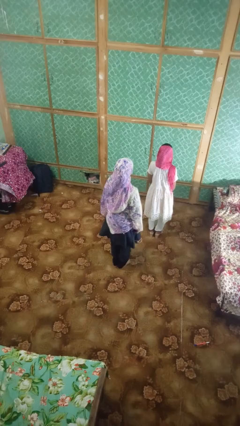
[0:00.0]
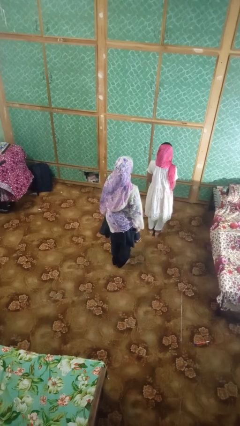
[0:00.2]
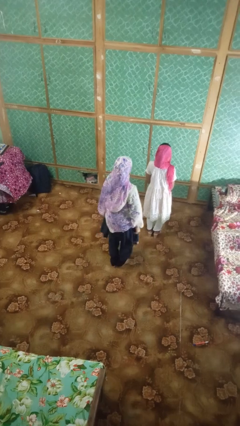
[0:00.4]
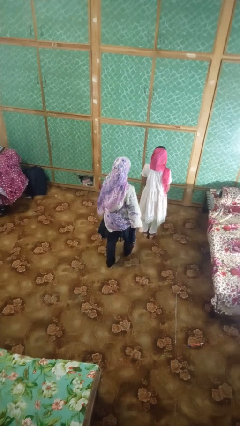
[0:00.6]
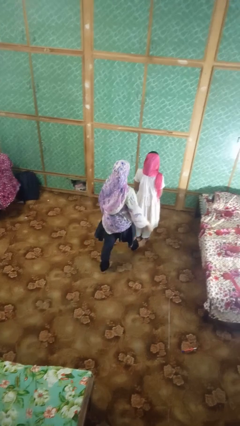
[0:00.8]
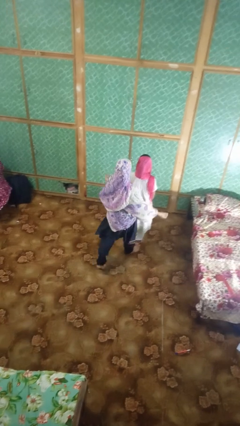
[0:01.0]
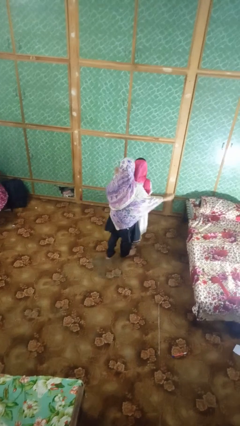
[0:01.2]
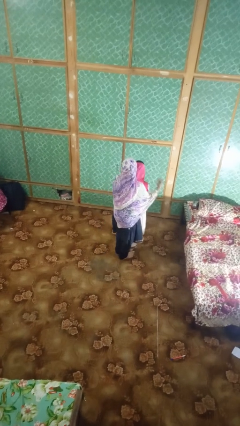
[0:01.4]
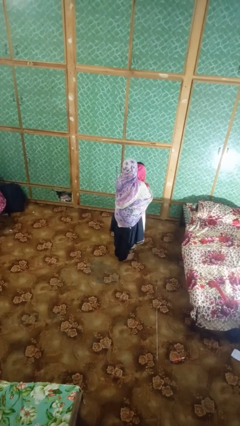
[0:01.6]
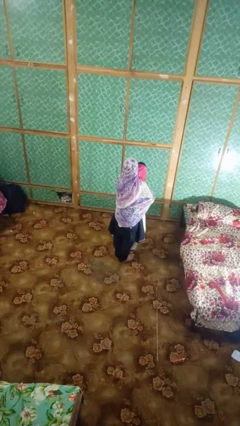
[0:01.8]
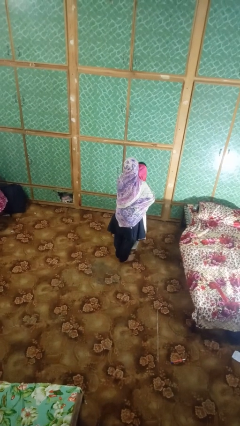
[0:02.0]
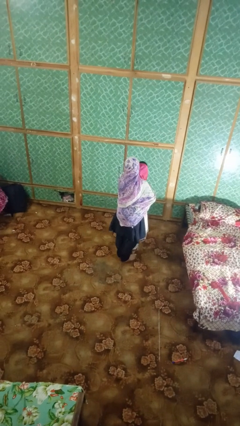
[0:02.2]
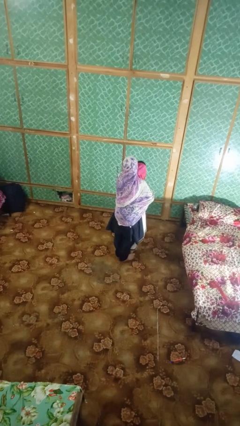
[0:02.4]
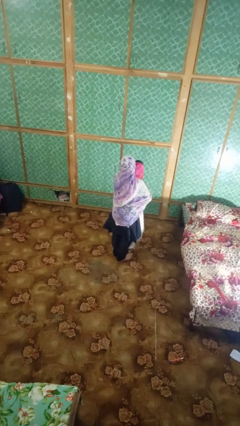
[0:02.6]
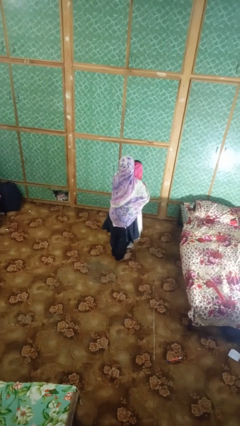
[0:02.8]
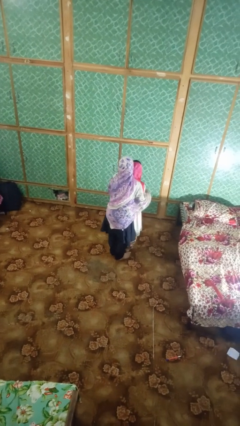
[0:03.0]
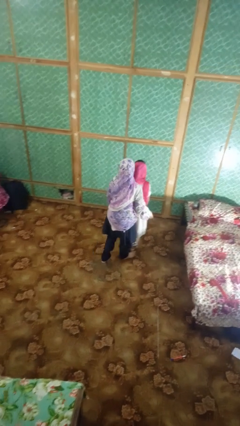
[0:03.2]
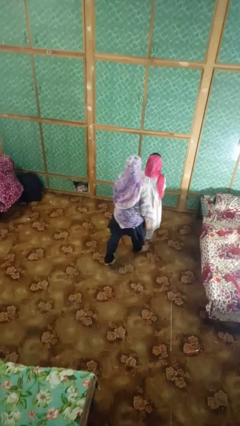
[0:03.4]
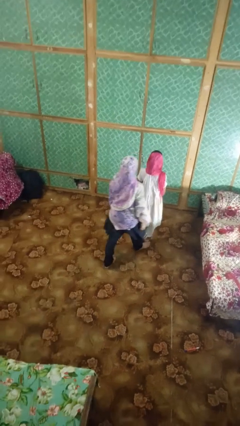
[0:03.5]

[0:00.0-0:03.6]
person hugs person from behind

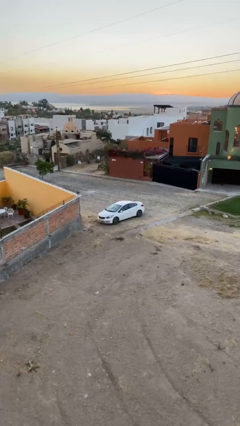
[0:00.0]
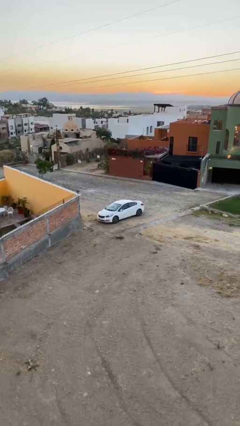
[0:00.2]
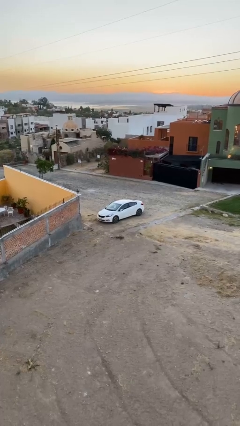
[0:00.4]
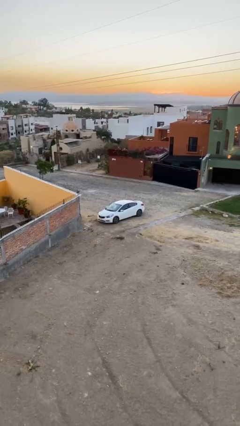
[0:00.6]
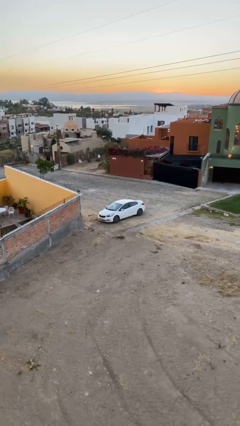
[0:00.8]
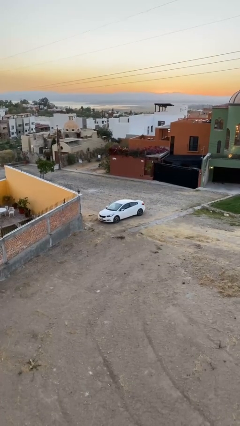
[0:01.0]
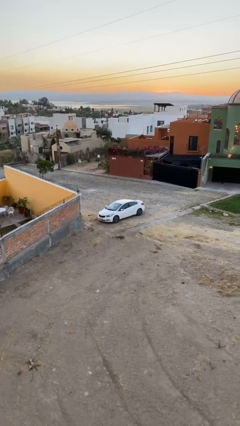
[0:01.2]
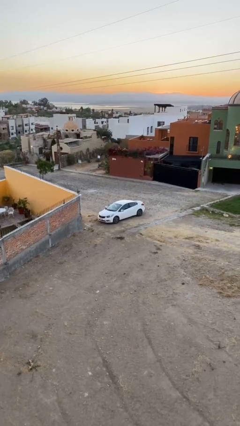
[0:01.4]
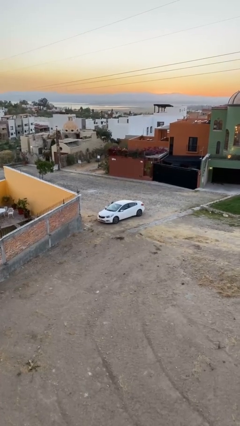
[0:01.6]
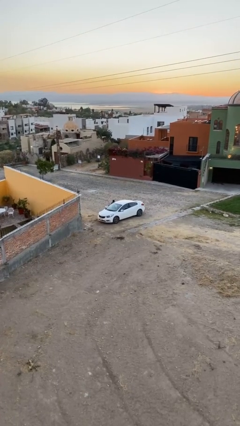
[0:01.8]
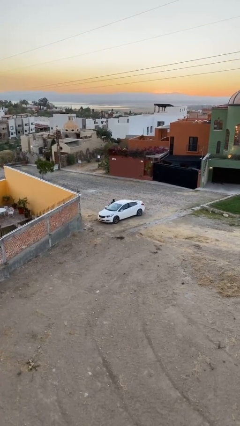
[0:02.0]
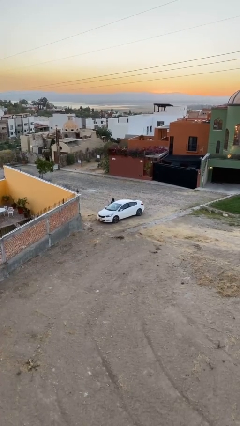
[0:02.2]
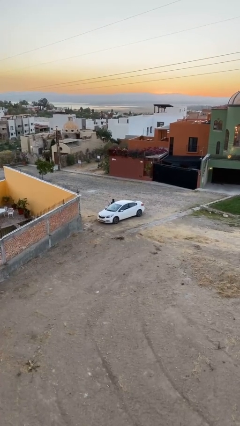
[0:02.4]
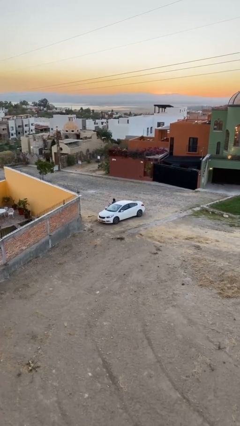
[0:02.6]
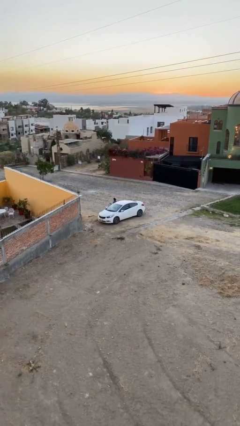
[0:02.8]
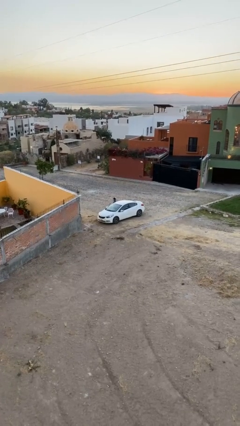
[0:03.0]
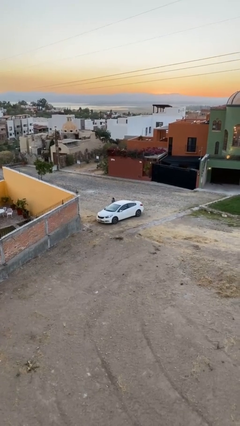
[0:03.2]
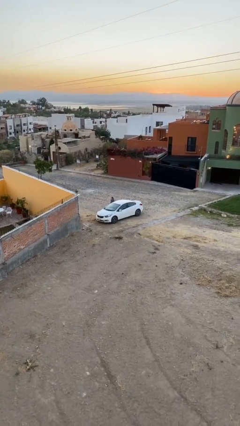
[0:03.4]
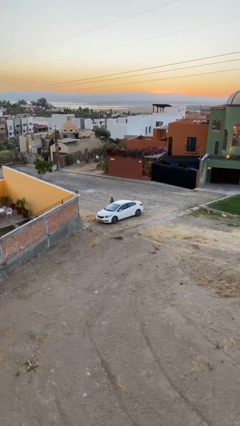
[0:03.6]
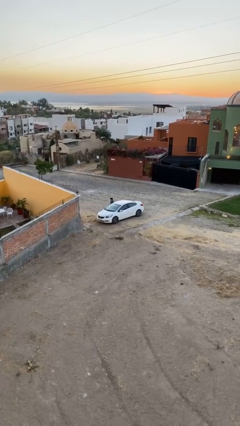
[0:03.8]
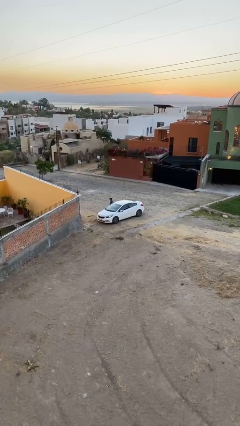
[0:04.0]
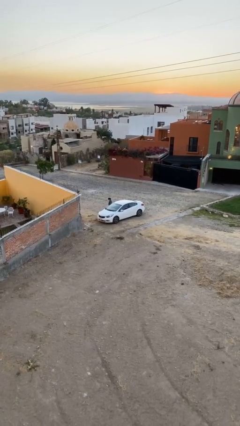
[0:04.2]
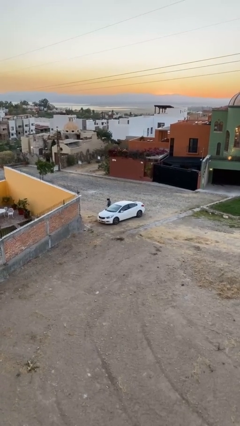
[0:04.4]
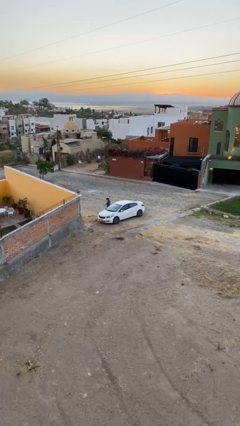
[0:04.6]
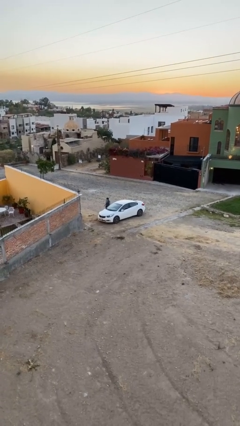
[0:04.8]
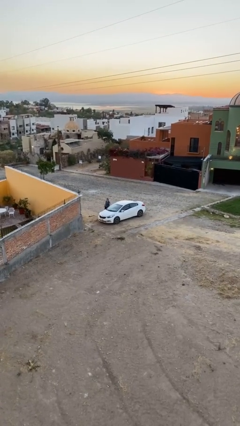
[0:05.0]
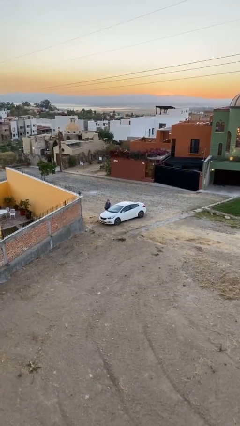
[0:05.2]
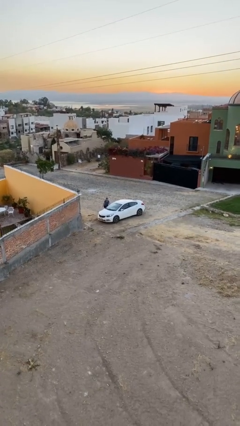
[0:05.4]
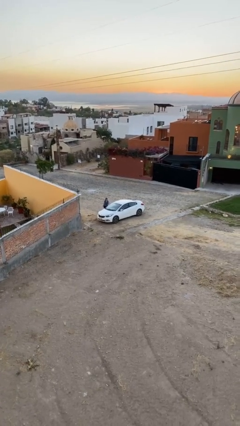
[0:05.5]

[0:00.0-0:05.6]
car drops off person

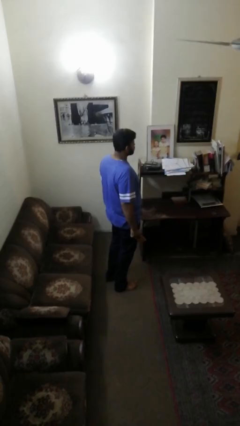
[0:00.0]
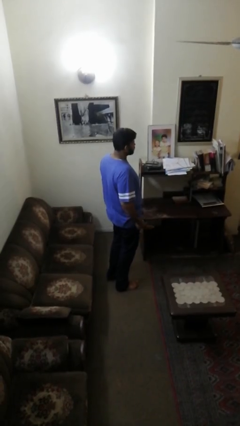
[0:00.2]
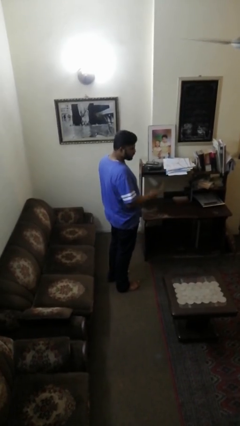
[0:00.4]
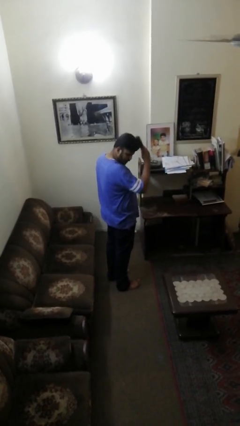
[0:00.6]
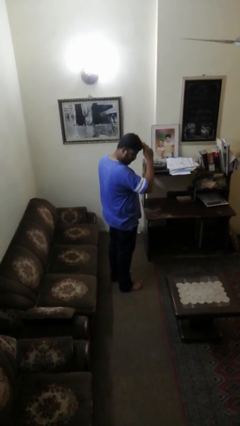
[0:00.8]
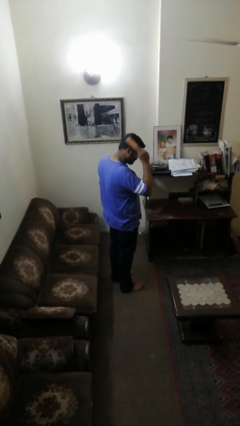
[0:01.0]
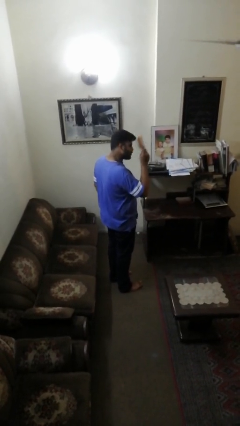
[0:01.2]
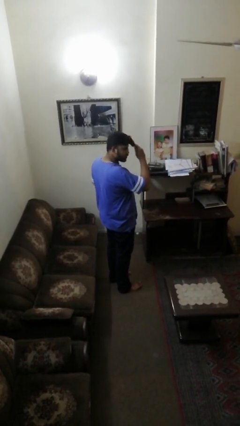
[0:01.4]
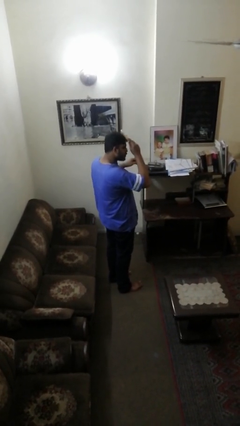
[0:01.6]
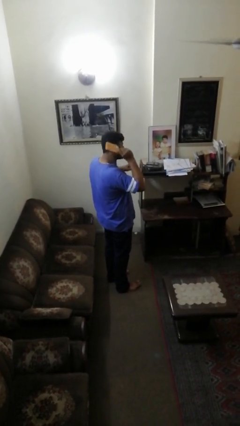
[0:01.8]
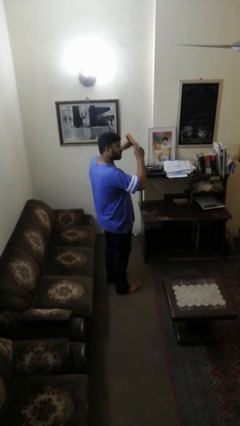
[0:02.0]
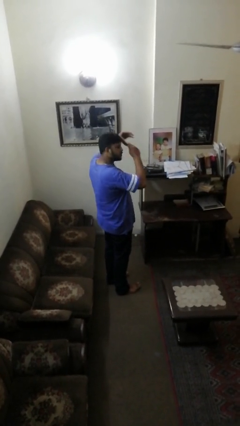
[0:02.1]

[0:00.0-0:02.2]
person brushes hair

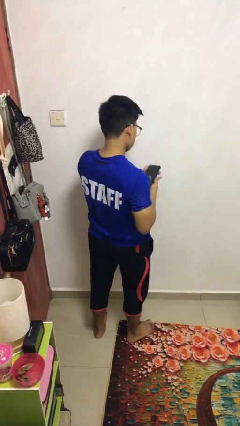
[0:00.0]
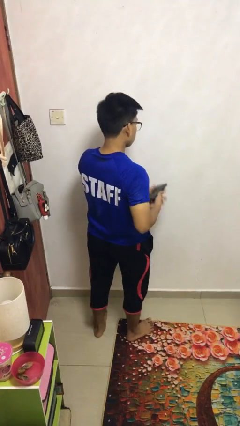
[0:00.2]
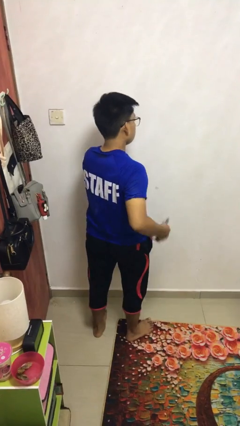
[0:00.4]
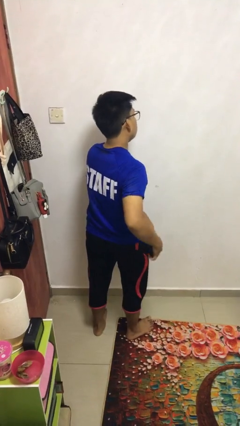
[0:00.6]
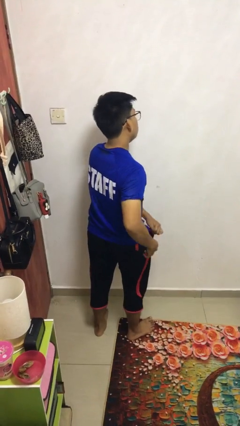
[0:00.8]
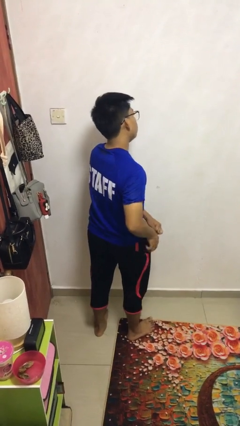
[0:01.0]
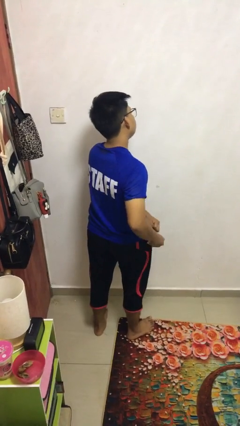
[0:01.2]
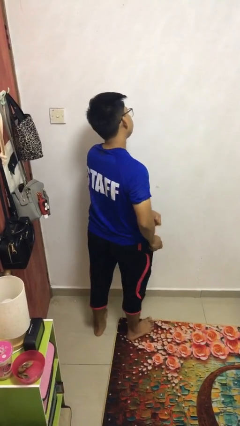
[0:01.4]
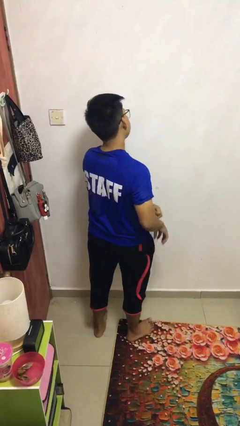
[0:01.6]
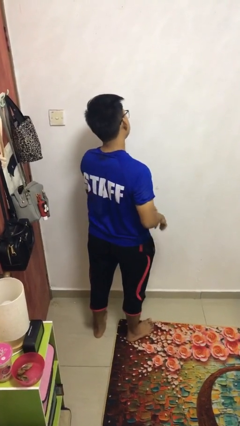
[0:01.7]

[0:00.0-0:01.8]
person puts phone into pocket

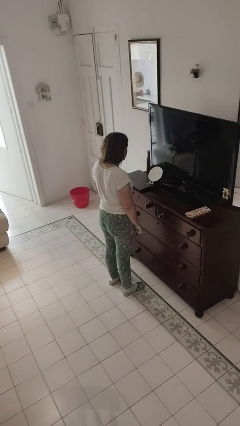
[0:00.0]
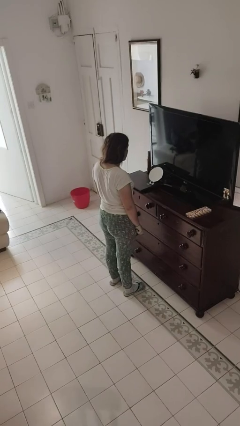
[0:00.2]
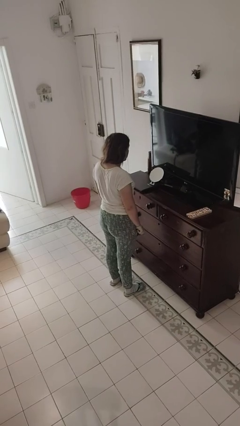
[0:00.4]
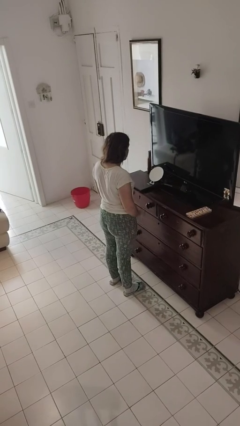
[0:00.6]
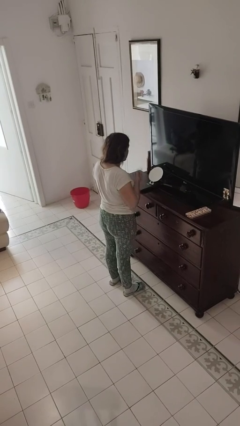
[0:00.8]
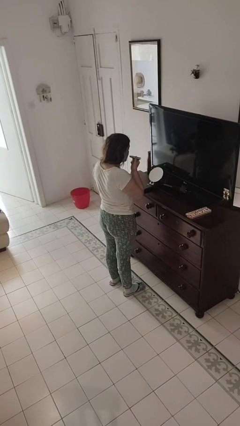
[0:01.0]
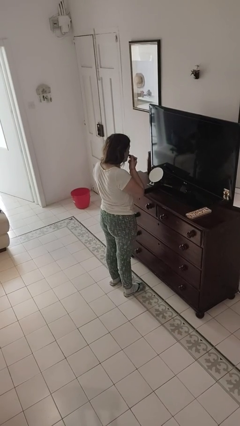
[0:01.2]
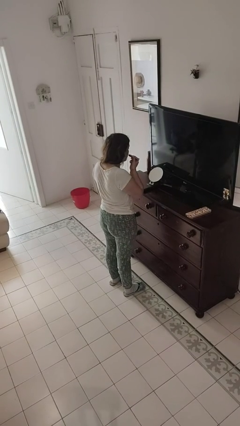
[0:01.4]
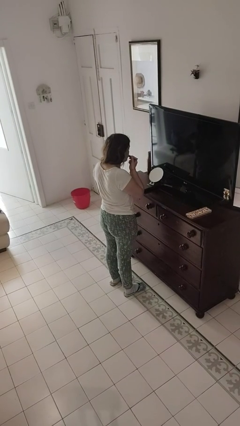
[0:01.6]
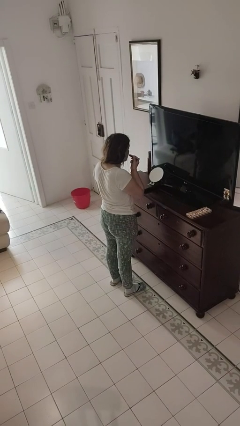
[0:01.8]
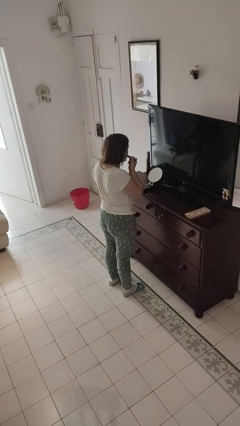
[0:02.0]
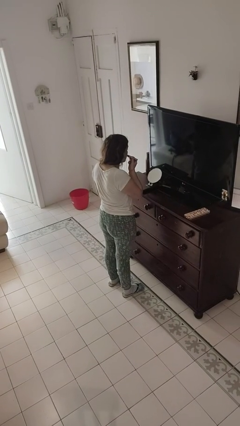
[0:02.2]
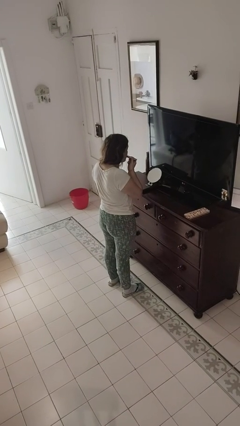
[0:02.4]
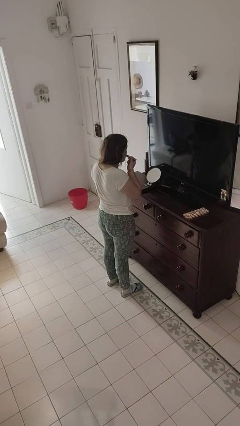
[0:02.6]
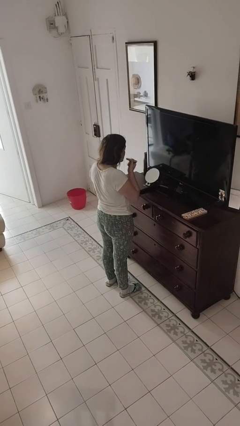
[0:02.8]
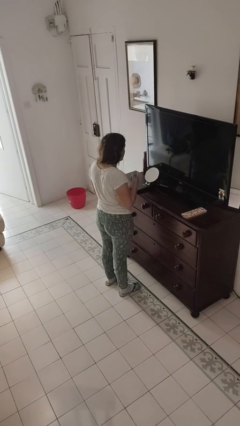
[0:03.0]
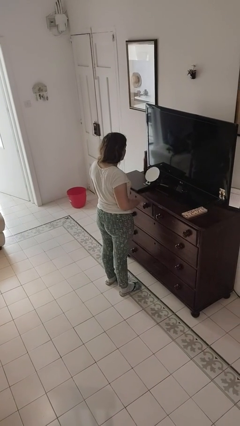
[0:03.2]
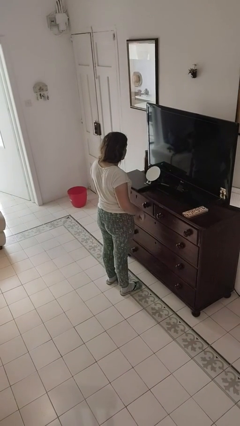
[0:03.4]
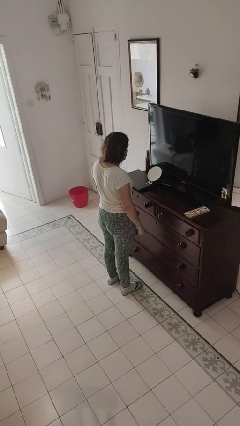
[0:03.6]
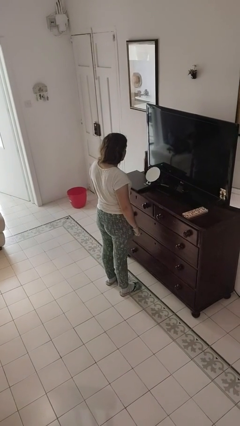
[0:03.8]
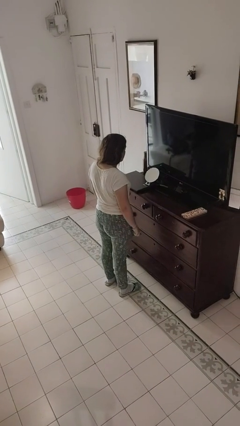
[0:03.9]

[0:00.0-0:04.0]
person applies lip makeup

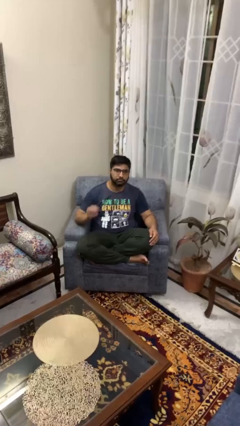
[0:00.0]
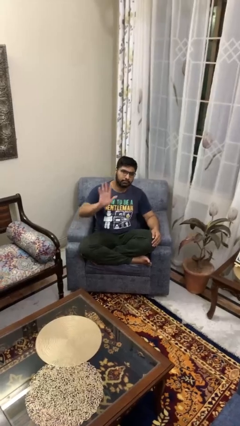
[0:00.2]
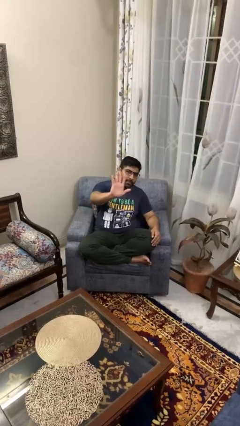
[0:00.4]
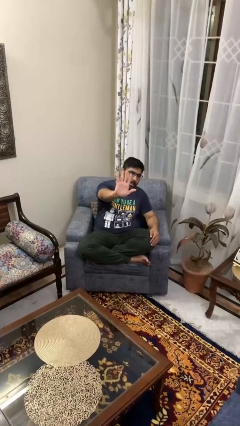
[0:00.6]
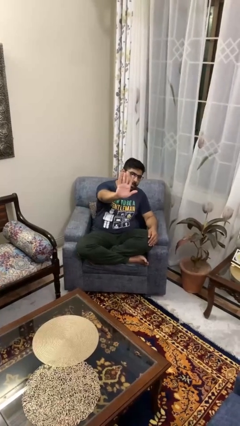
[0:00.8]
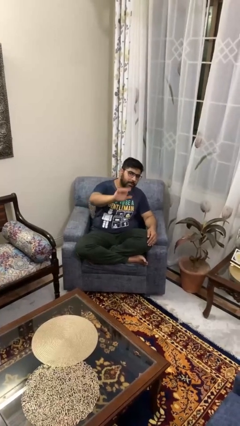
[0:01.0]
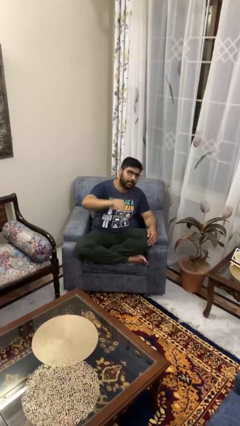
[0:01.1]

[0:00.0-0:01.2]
person gestures number five
